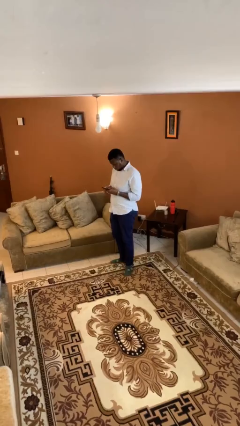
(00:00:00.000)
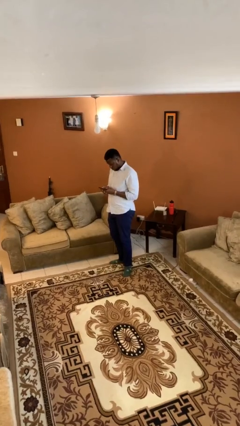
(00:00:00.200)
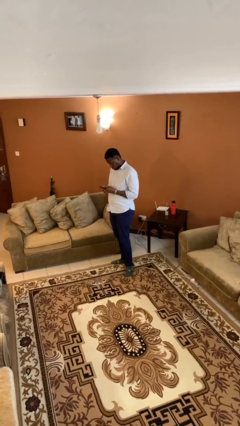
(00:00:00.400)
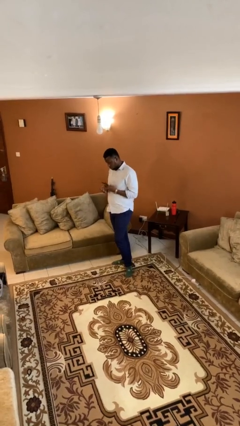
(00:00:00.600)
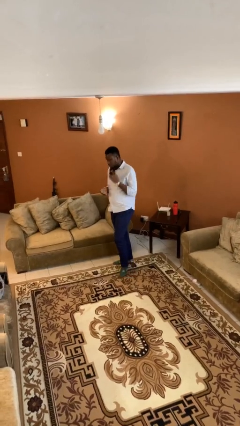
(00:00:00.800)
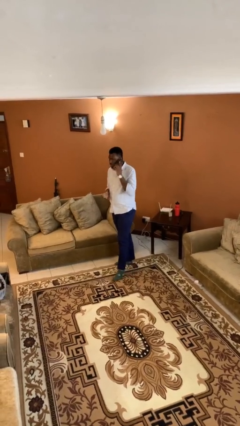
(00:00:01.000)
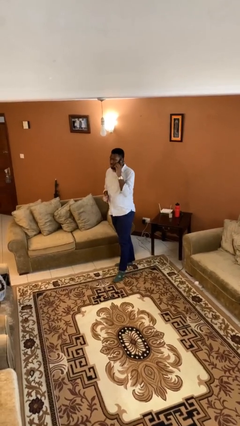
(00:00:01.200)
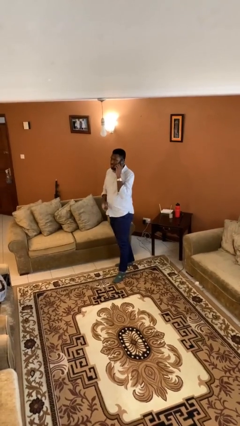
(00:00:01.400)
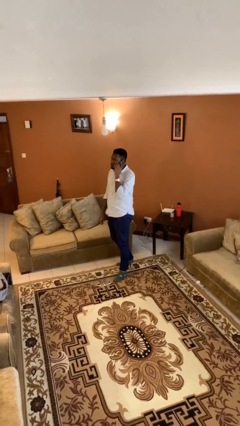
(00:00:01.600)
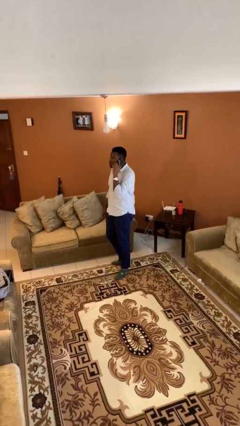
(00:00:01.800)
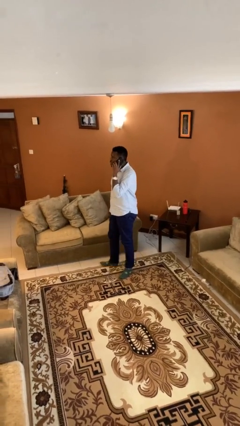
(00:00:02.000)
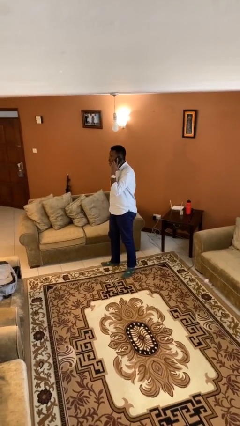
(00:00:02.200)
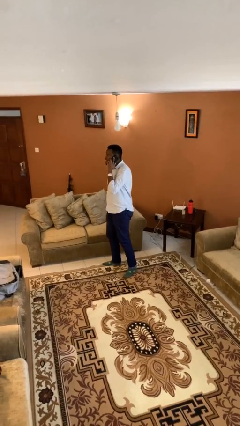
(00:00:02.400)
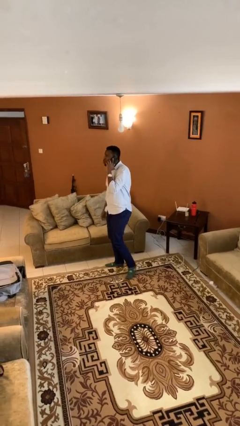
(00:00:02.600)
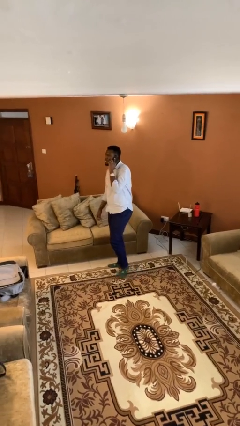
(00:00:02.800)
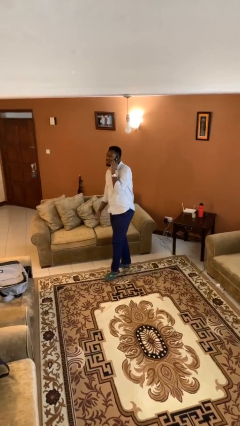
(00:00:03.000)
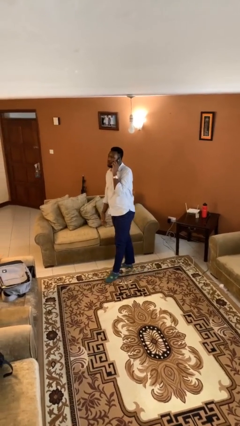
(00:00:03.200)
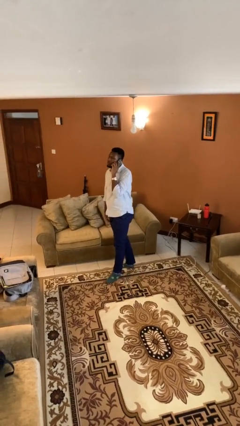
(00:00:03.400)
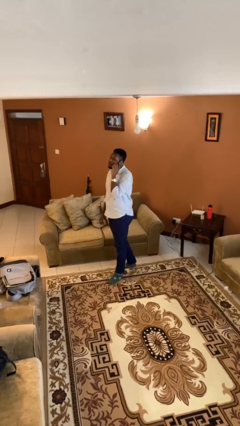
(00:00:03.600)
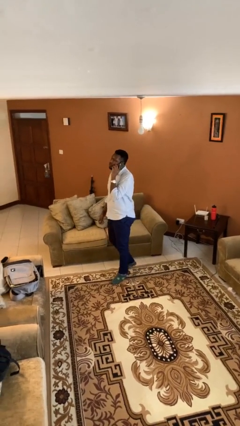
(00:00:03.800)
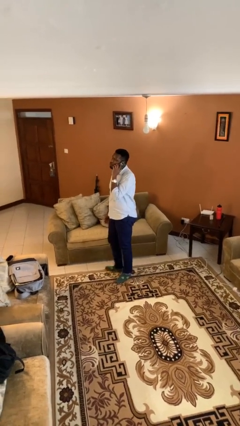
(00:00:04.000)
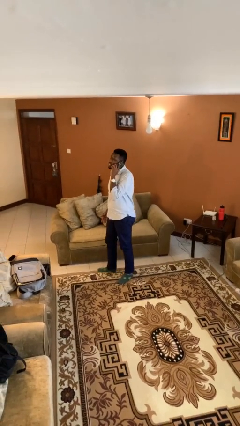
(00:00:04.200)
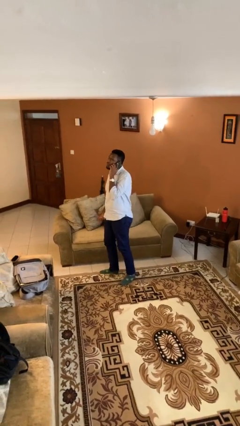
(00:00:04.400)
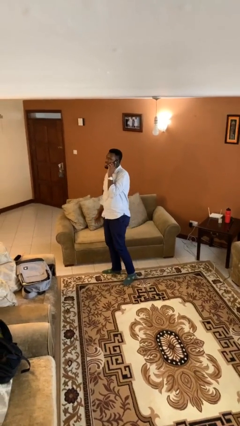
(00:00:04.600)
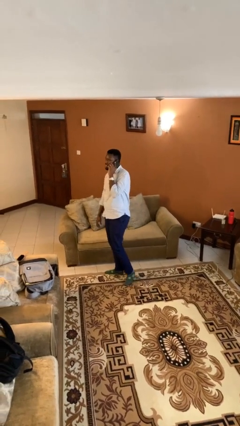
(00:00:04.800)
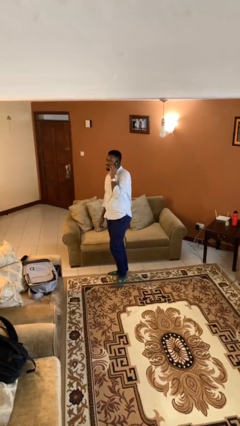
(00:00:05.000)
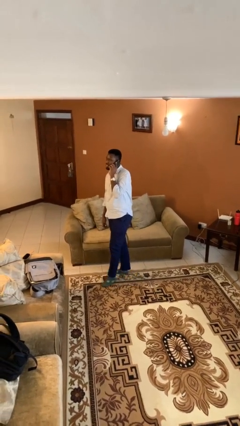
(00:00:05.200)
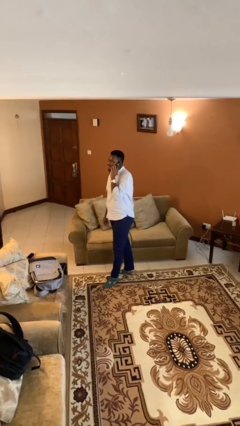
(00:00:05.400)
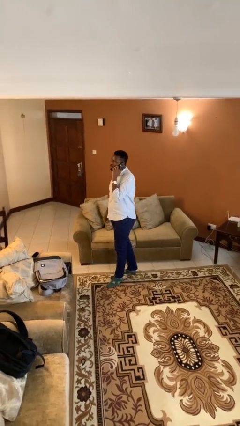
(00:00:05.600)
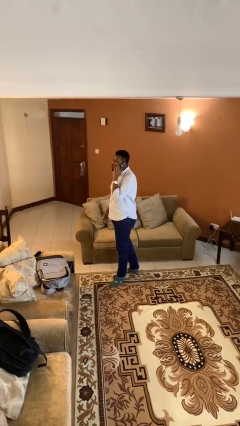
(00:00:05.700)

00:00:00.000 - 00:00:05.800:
person talks on phone

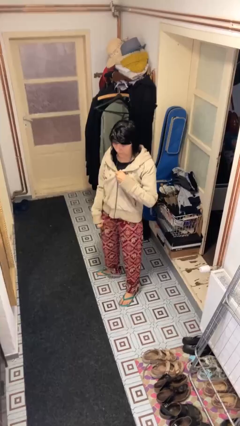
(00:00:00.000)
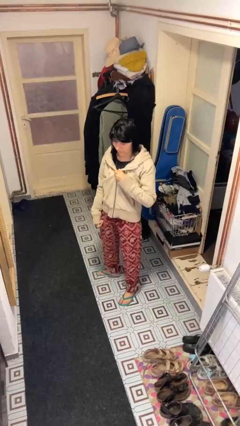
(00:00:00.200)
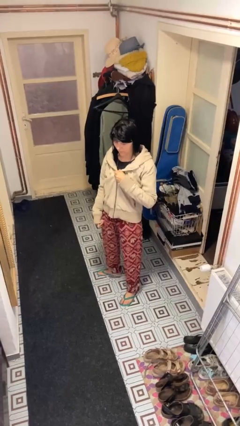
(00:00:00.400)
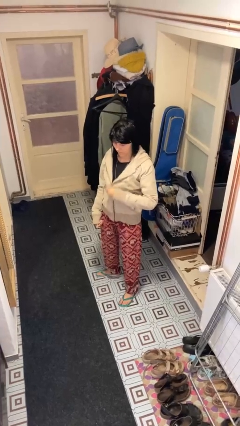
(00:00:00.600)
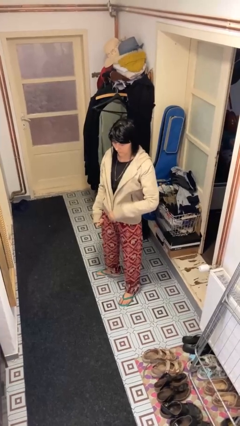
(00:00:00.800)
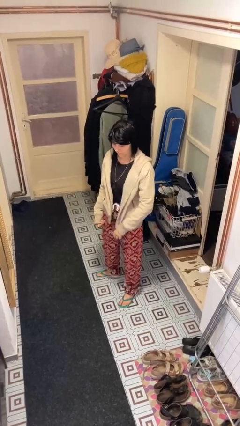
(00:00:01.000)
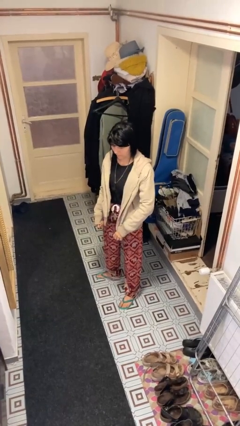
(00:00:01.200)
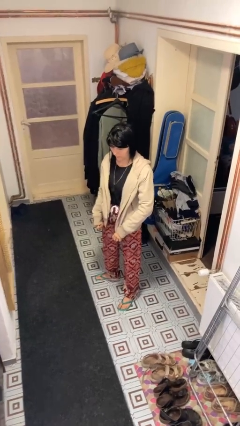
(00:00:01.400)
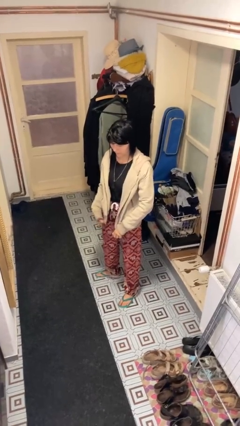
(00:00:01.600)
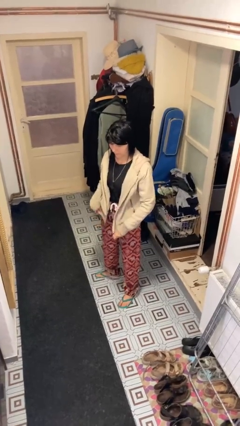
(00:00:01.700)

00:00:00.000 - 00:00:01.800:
person unzips jacket

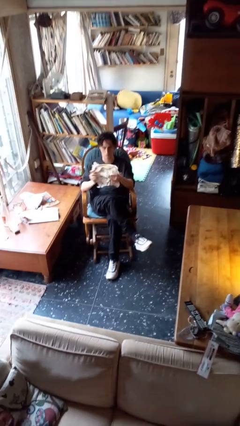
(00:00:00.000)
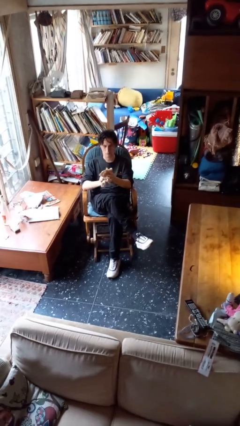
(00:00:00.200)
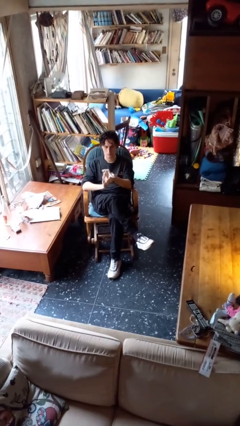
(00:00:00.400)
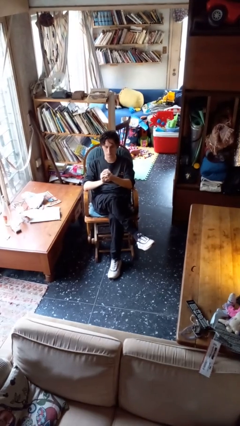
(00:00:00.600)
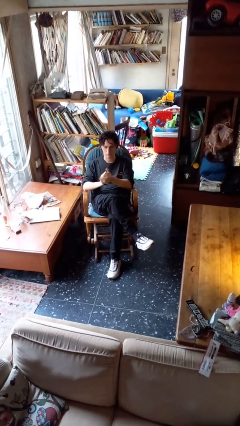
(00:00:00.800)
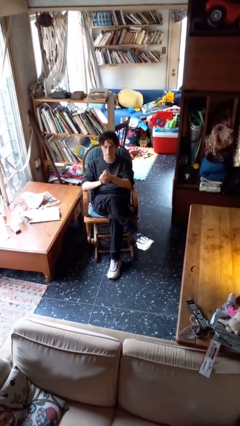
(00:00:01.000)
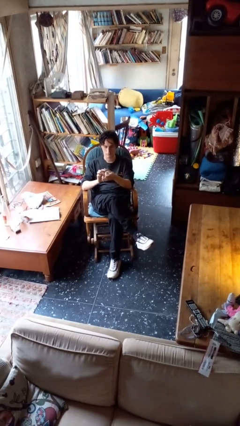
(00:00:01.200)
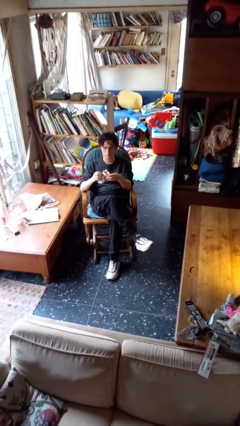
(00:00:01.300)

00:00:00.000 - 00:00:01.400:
person crumples paper

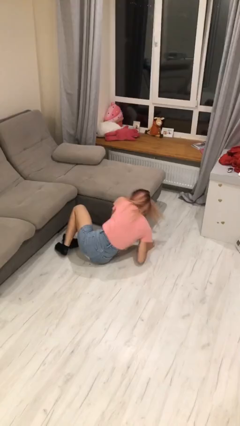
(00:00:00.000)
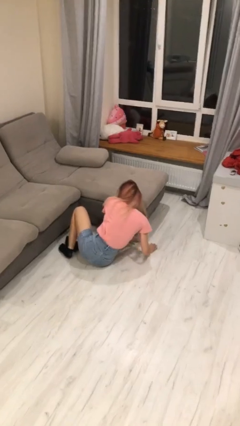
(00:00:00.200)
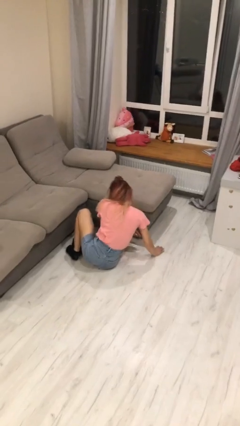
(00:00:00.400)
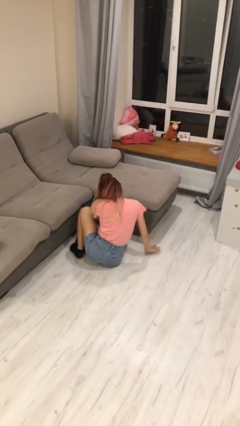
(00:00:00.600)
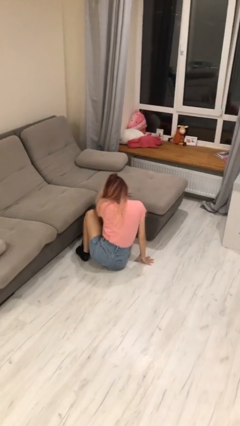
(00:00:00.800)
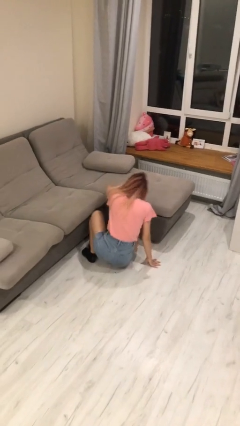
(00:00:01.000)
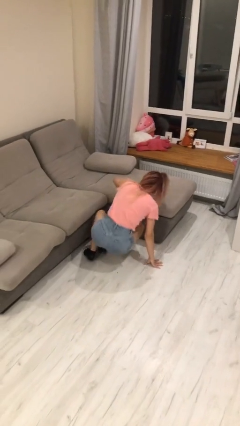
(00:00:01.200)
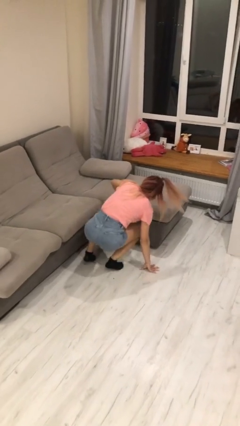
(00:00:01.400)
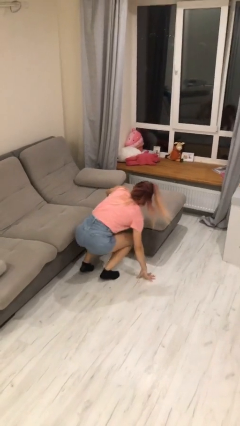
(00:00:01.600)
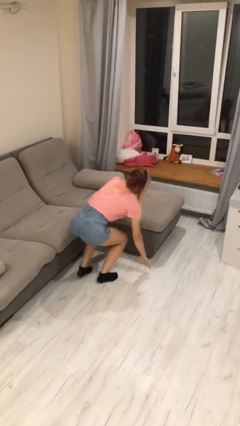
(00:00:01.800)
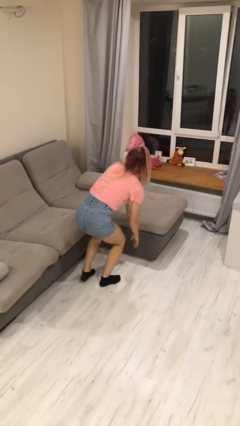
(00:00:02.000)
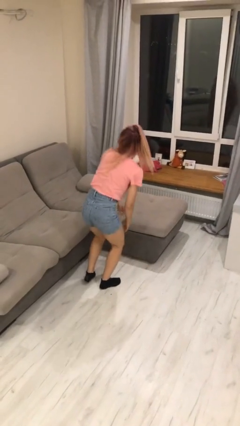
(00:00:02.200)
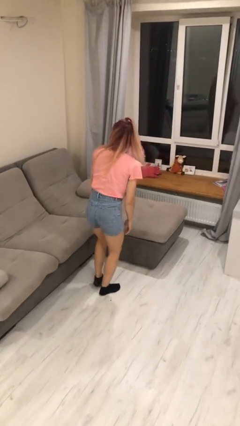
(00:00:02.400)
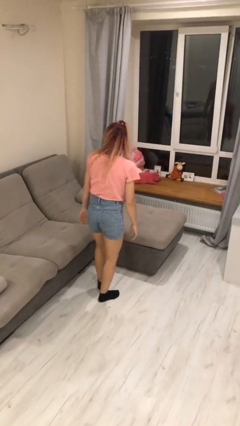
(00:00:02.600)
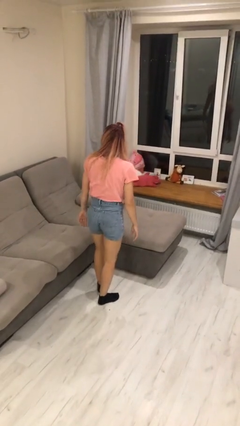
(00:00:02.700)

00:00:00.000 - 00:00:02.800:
person stands up from floor

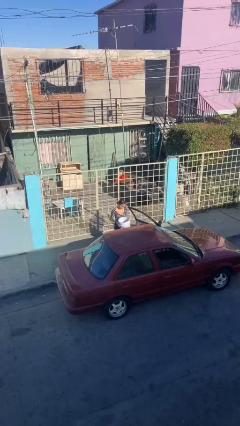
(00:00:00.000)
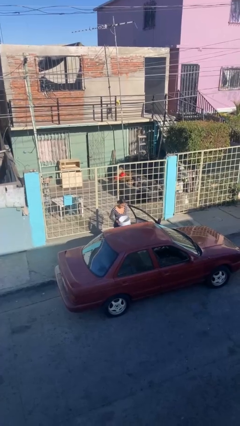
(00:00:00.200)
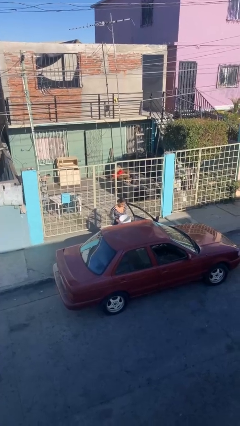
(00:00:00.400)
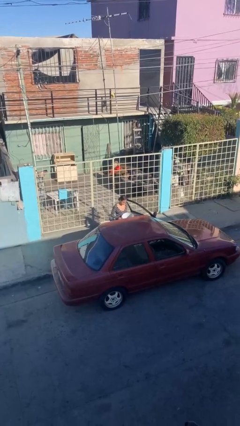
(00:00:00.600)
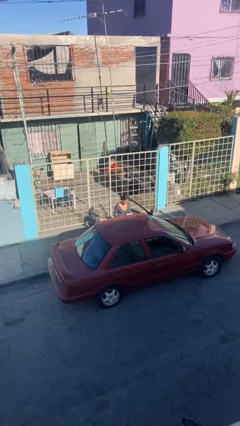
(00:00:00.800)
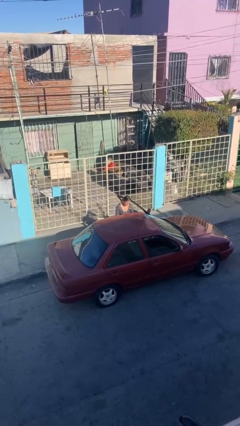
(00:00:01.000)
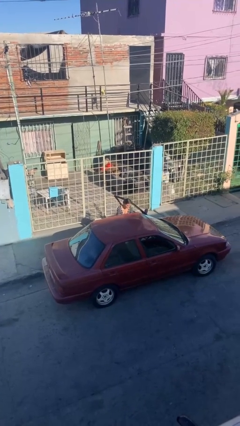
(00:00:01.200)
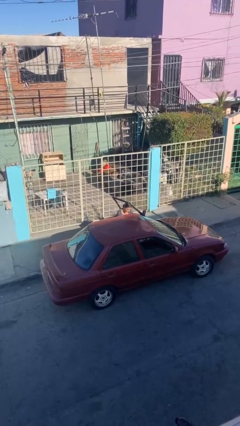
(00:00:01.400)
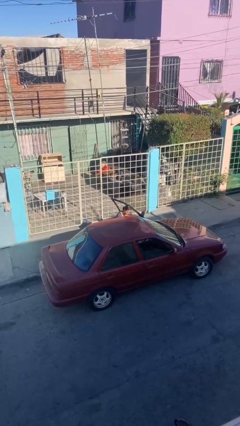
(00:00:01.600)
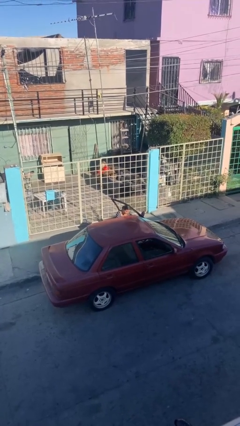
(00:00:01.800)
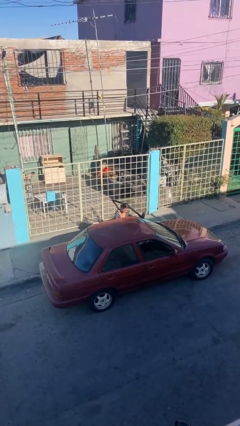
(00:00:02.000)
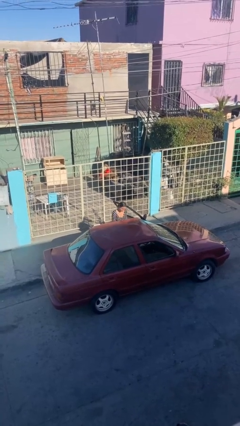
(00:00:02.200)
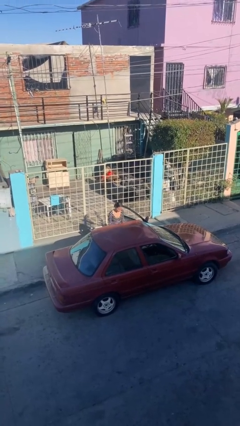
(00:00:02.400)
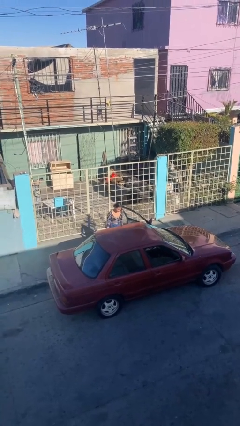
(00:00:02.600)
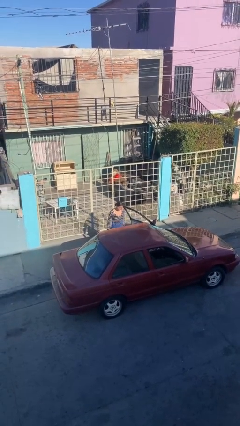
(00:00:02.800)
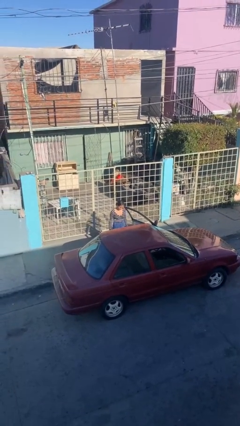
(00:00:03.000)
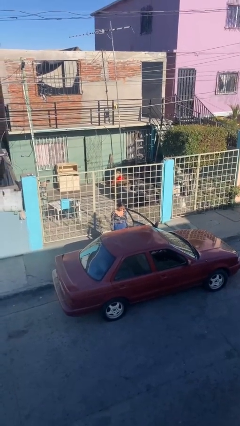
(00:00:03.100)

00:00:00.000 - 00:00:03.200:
person loads car

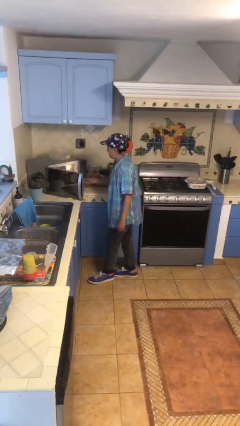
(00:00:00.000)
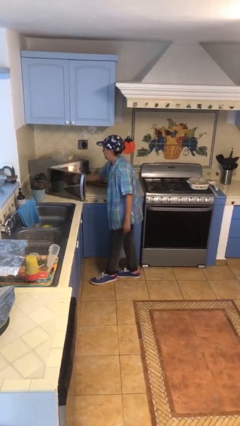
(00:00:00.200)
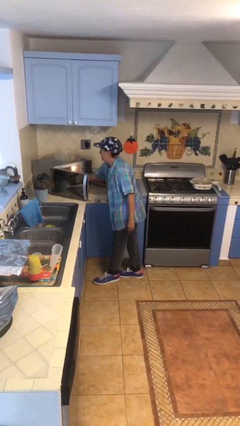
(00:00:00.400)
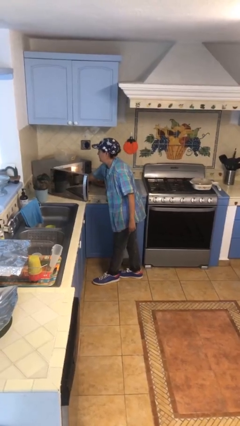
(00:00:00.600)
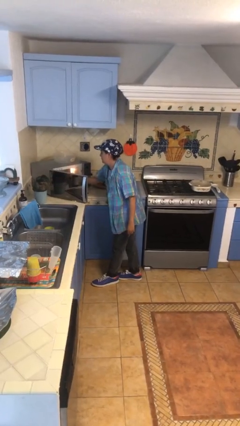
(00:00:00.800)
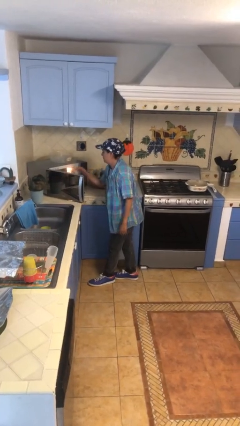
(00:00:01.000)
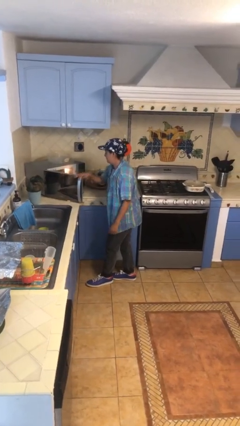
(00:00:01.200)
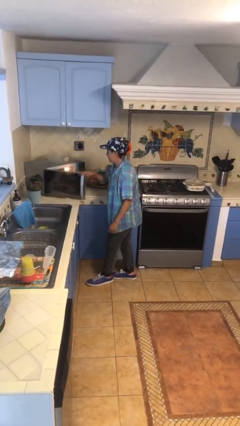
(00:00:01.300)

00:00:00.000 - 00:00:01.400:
person puts object into microwave

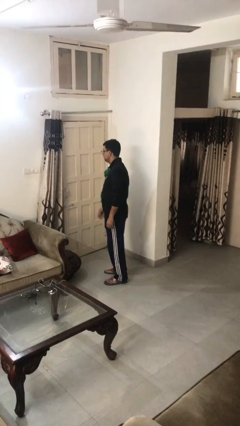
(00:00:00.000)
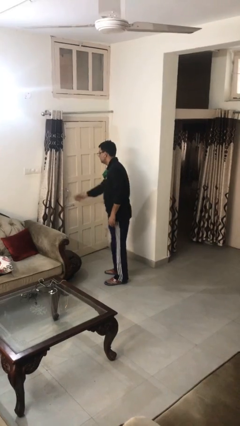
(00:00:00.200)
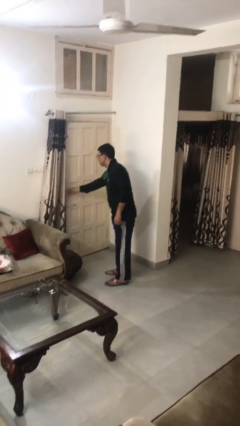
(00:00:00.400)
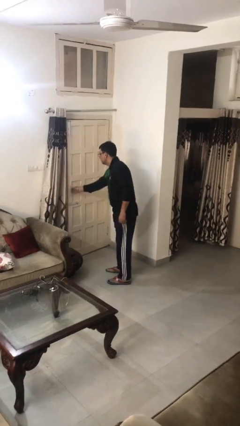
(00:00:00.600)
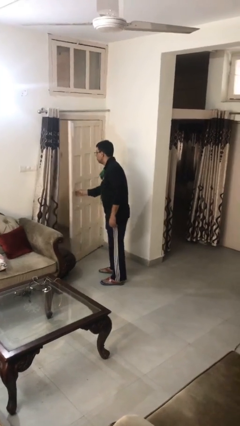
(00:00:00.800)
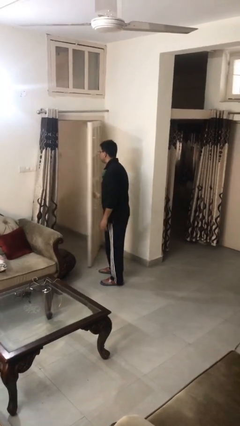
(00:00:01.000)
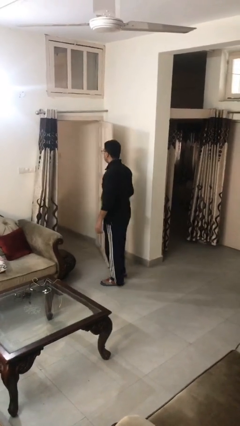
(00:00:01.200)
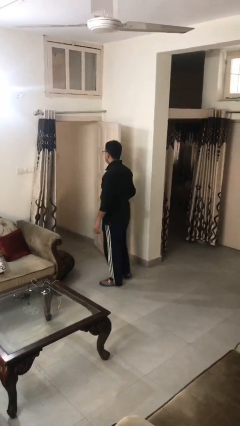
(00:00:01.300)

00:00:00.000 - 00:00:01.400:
person opens facility door
